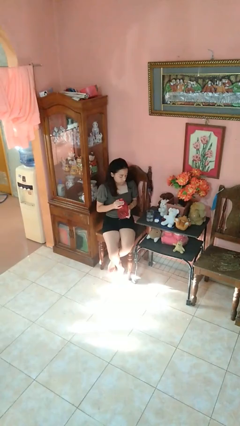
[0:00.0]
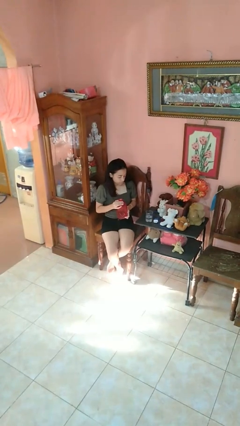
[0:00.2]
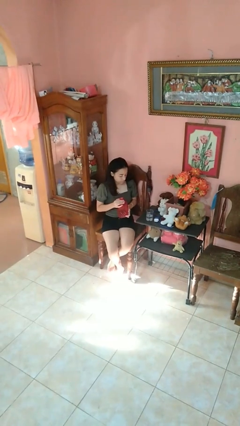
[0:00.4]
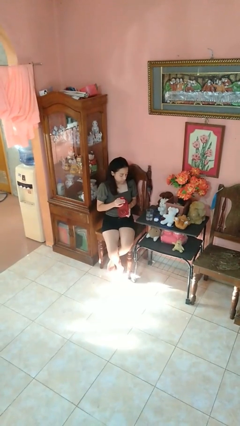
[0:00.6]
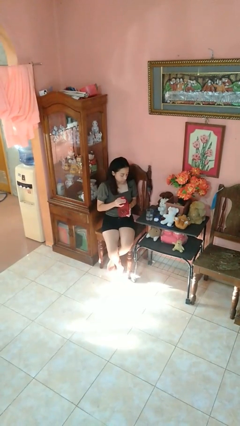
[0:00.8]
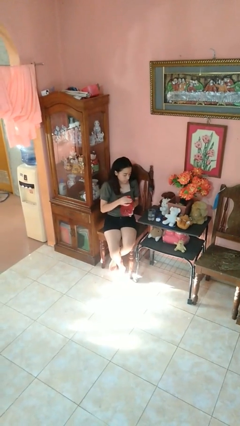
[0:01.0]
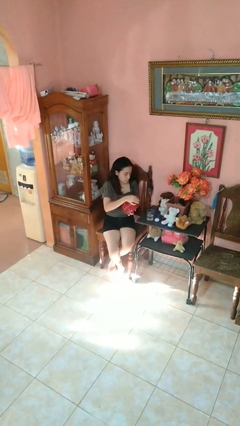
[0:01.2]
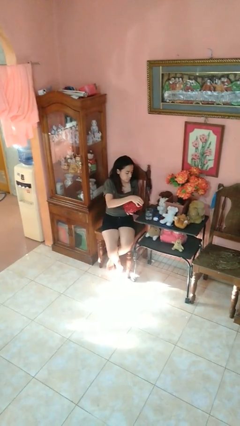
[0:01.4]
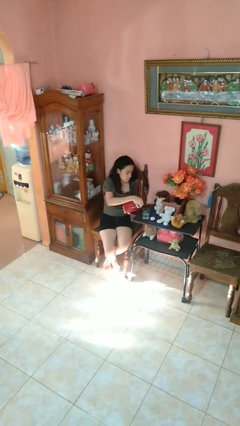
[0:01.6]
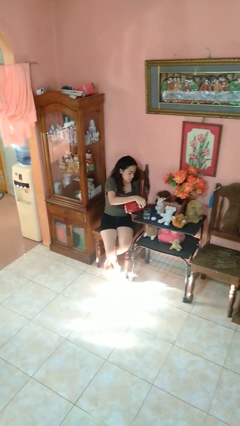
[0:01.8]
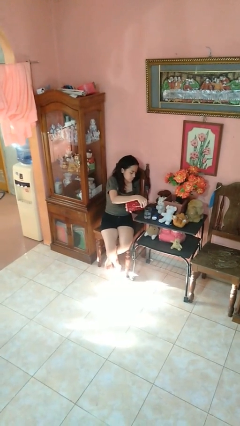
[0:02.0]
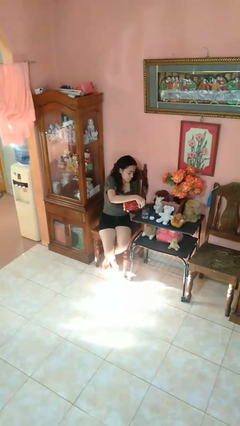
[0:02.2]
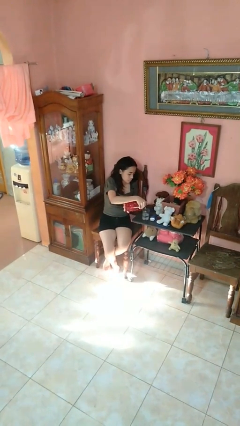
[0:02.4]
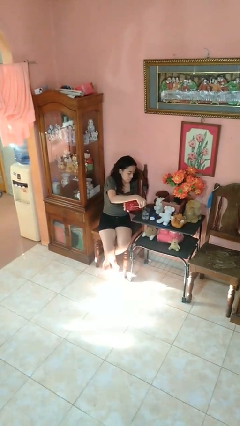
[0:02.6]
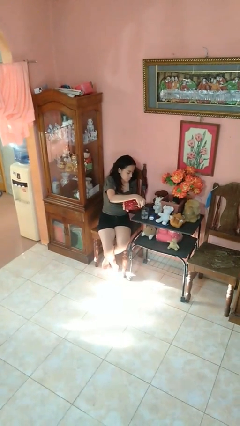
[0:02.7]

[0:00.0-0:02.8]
person pours liquid into cup

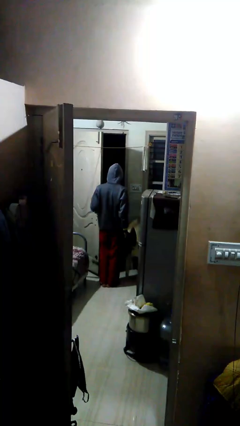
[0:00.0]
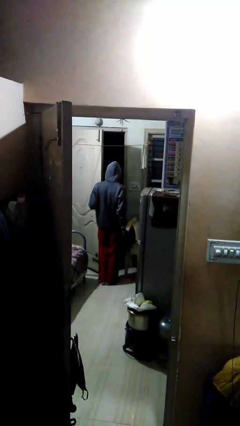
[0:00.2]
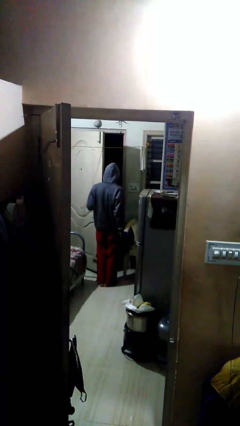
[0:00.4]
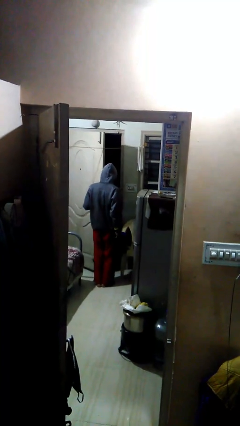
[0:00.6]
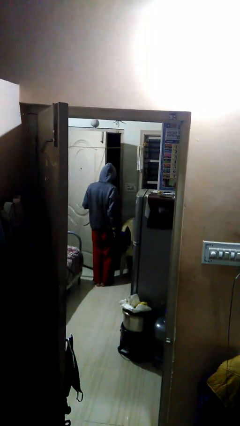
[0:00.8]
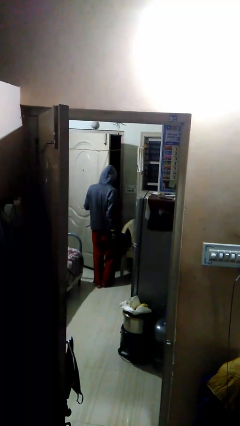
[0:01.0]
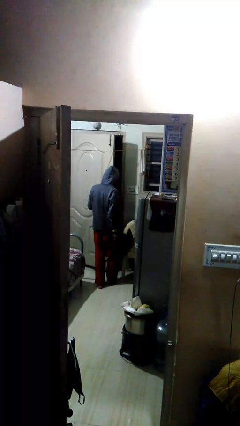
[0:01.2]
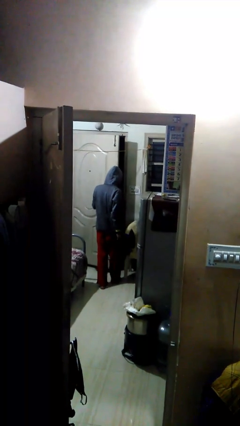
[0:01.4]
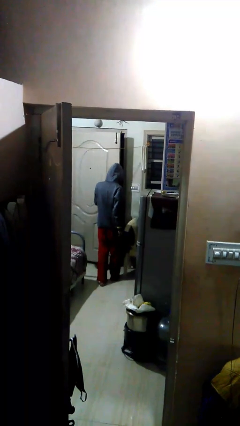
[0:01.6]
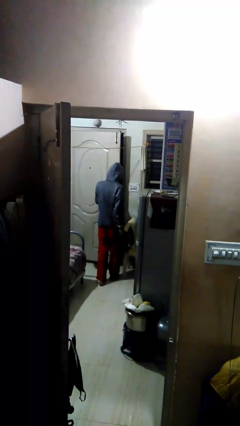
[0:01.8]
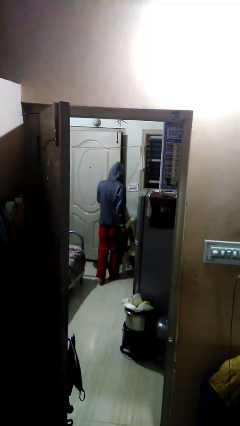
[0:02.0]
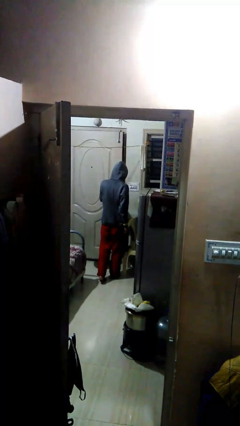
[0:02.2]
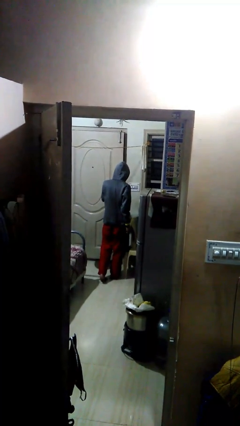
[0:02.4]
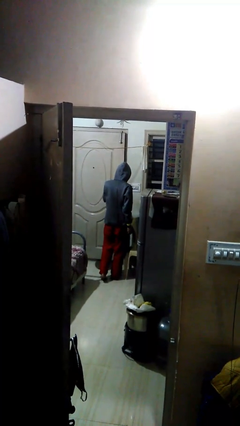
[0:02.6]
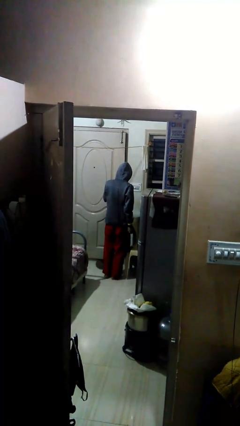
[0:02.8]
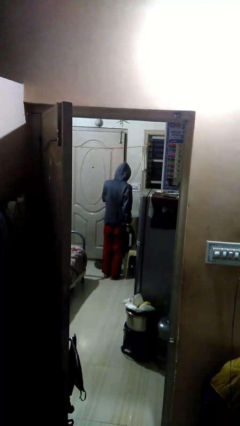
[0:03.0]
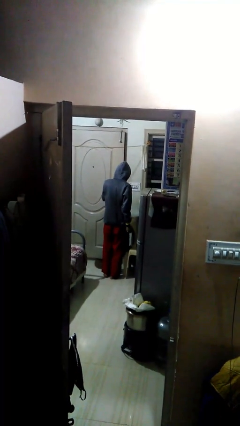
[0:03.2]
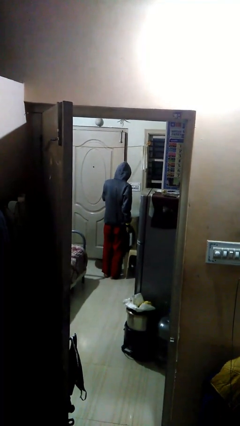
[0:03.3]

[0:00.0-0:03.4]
person opens facility door

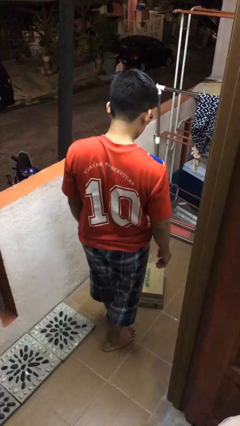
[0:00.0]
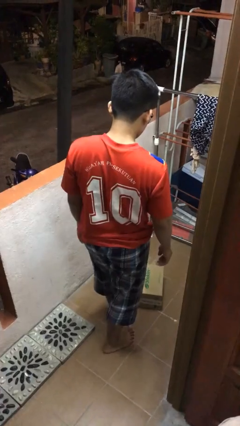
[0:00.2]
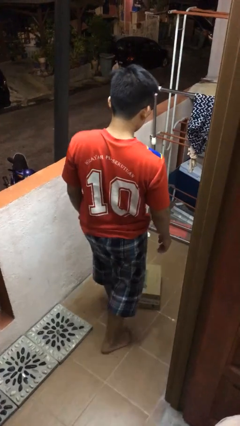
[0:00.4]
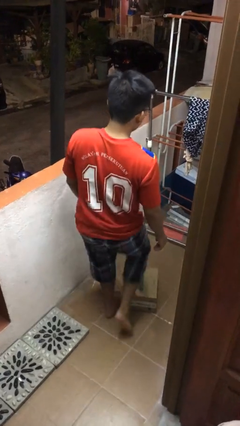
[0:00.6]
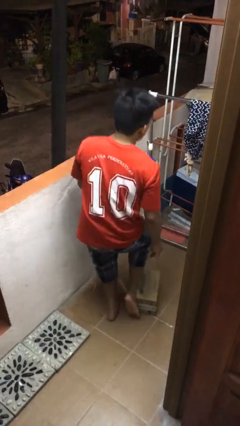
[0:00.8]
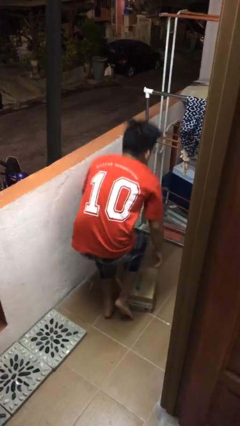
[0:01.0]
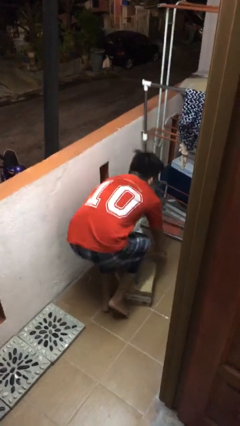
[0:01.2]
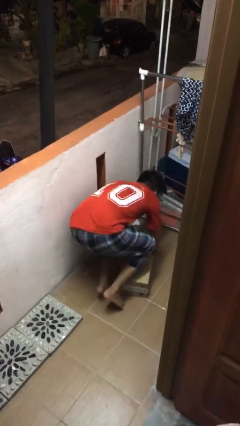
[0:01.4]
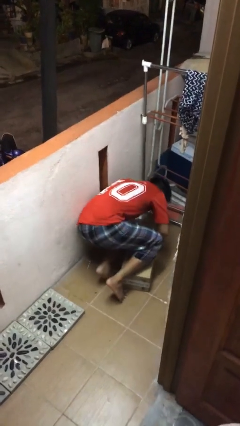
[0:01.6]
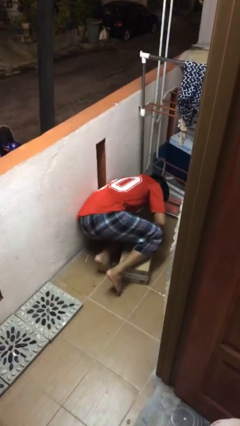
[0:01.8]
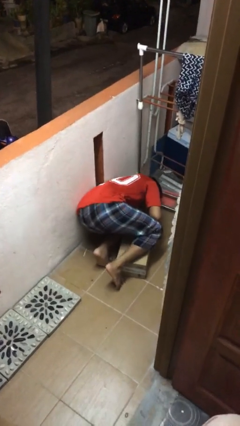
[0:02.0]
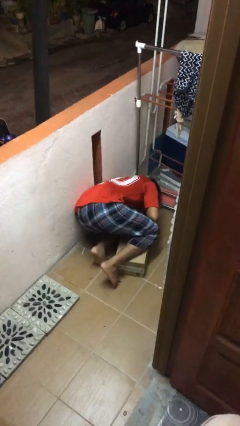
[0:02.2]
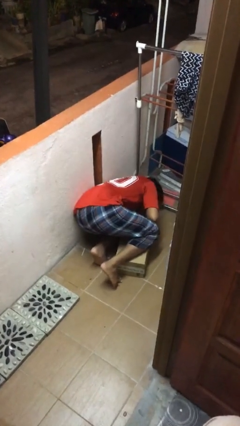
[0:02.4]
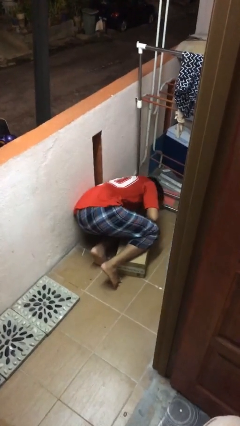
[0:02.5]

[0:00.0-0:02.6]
person trips on object on floor

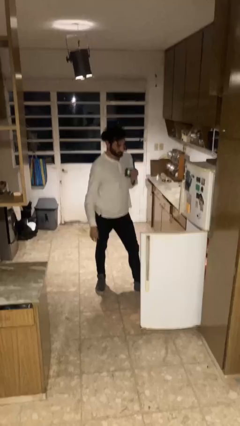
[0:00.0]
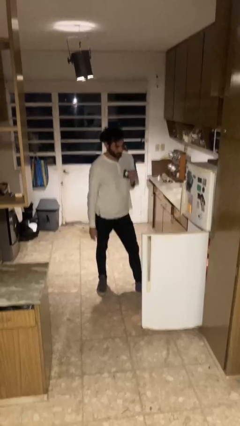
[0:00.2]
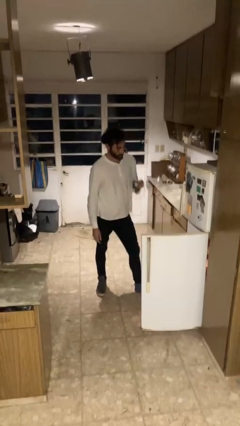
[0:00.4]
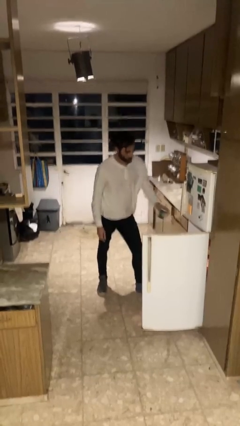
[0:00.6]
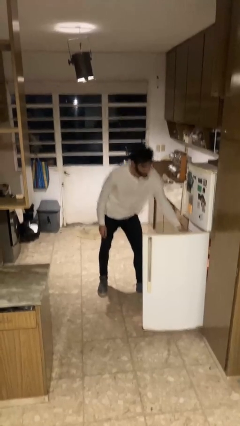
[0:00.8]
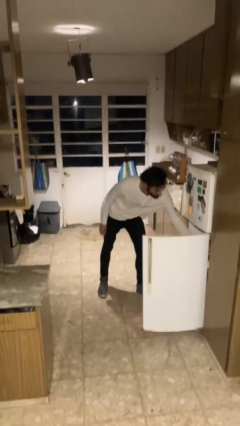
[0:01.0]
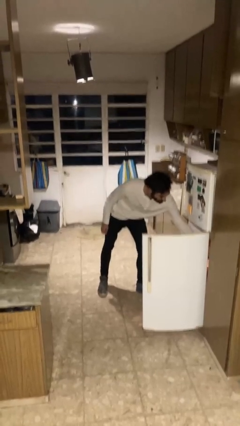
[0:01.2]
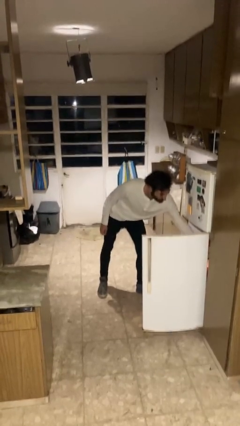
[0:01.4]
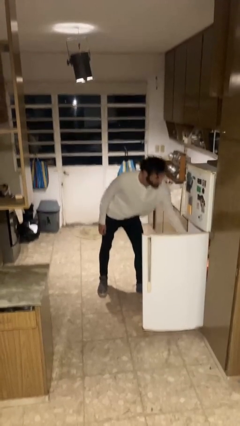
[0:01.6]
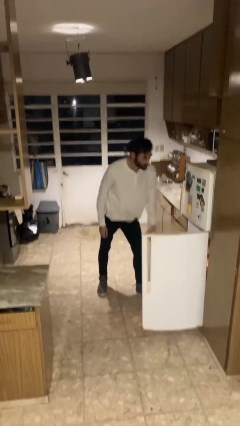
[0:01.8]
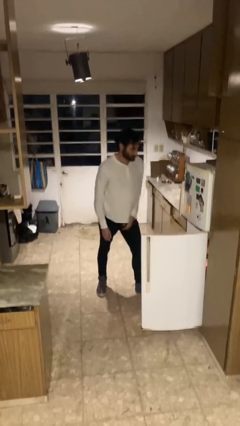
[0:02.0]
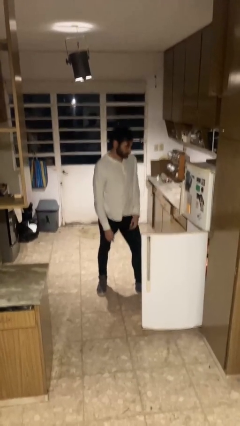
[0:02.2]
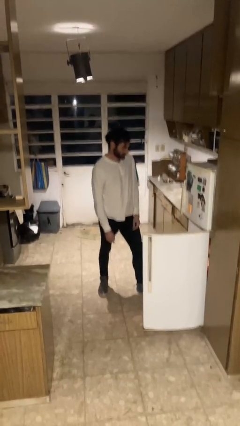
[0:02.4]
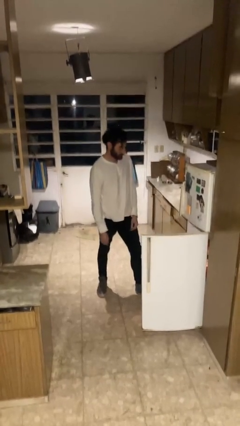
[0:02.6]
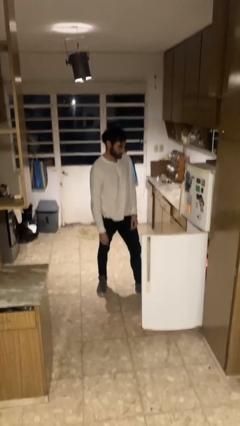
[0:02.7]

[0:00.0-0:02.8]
person puts object into refrigerator

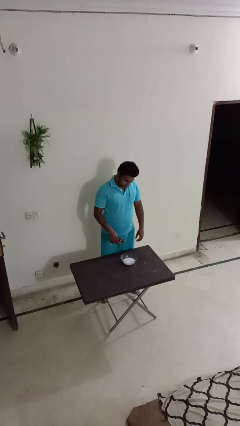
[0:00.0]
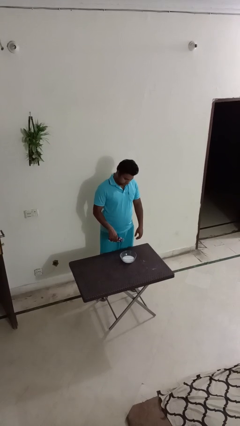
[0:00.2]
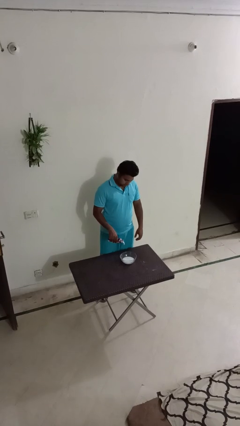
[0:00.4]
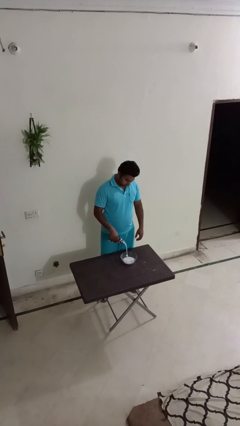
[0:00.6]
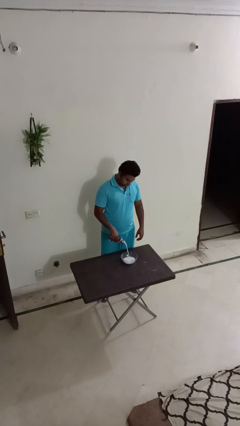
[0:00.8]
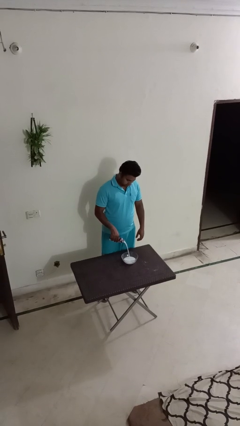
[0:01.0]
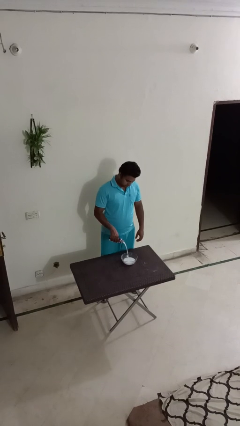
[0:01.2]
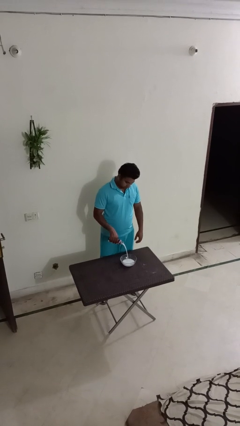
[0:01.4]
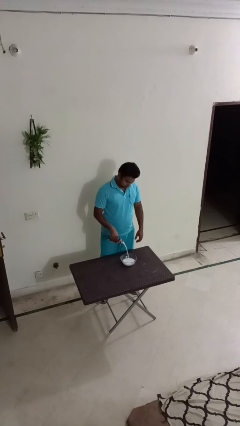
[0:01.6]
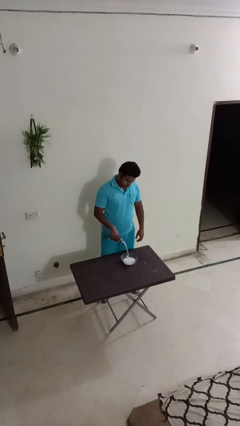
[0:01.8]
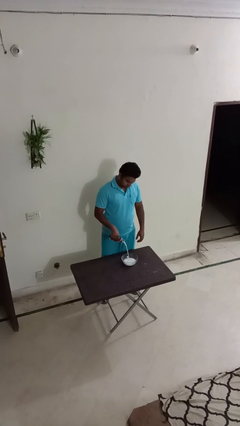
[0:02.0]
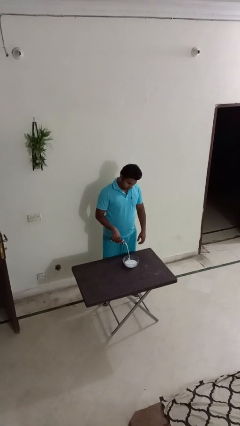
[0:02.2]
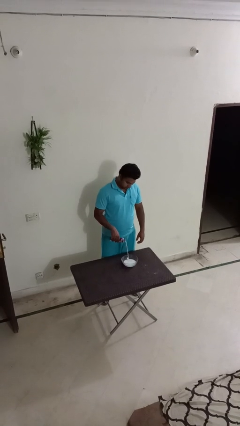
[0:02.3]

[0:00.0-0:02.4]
person pours into bowl

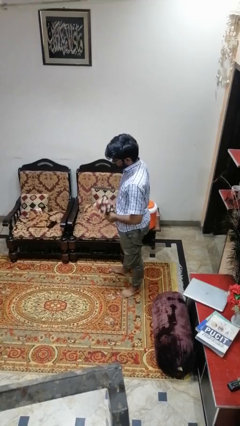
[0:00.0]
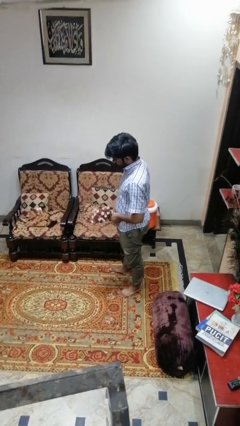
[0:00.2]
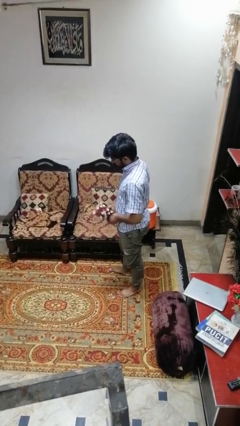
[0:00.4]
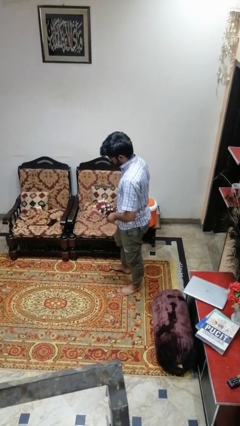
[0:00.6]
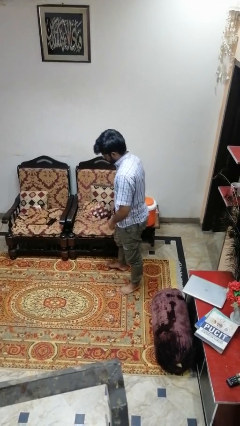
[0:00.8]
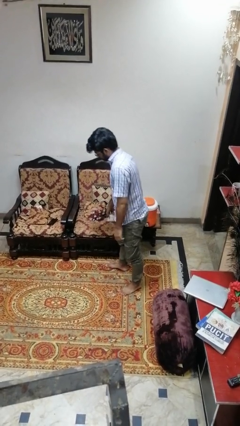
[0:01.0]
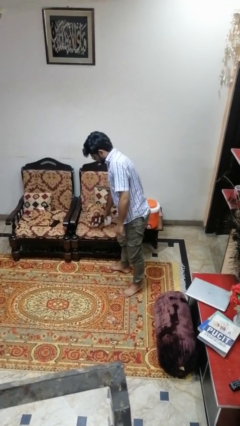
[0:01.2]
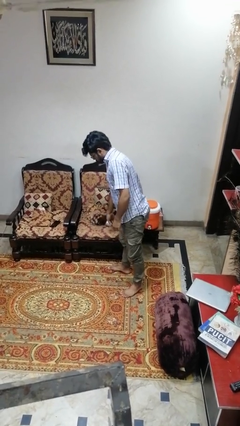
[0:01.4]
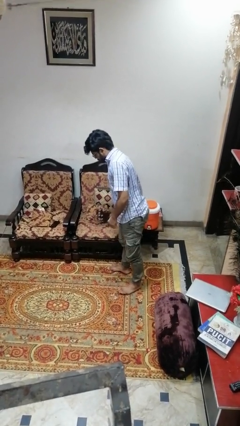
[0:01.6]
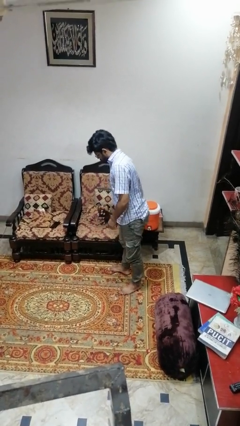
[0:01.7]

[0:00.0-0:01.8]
person puts down object on couch

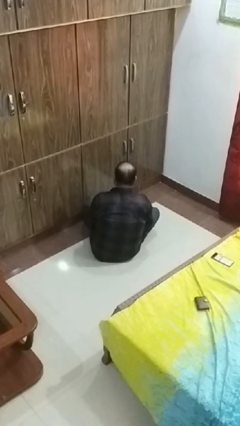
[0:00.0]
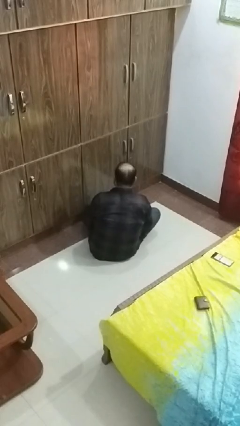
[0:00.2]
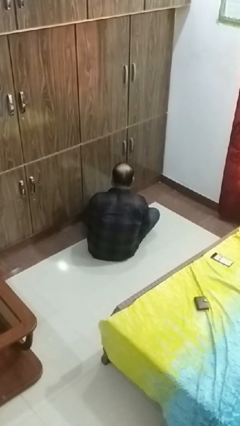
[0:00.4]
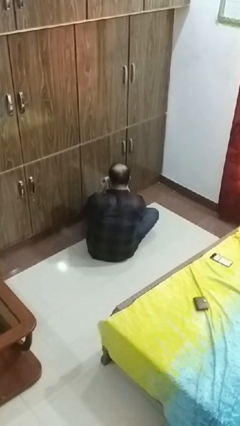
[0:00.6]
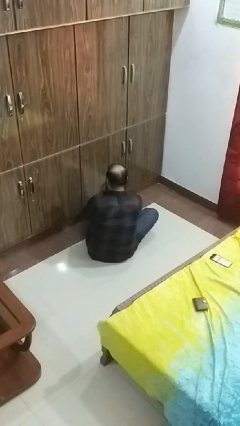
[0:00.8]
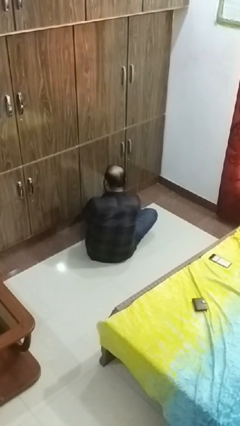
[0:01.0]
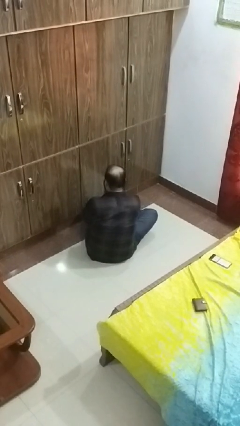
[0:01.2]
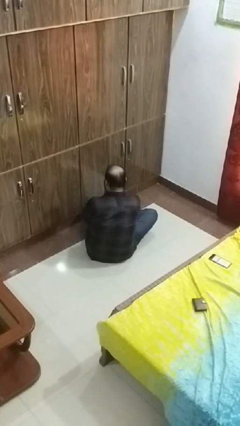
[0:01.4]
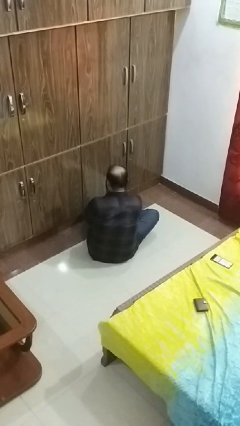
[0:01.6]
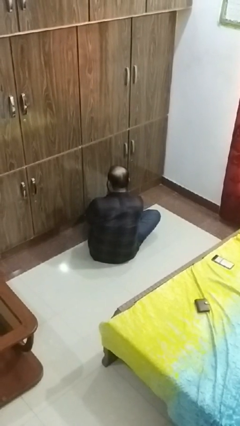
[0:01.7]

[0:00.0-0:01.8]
person blows nose
